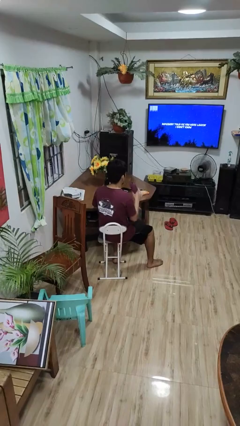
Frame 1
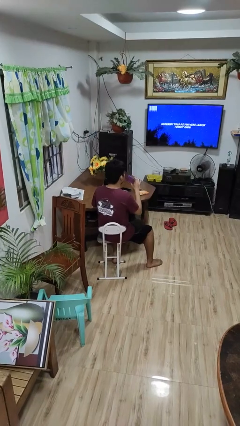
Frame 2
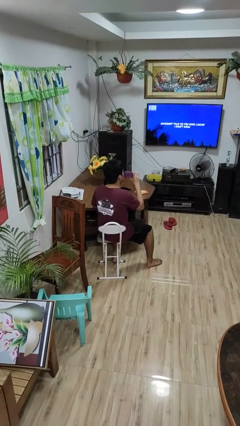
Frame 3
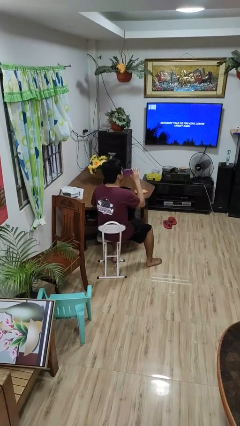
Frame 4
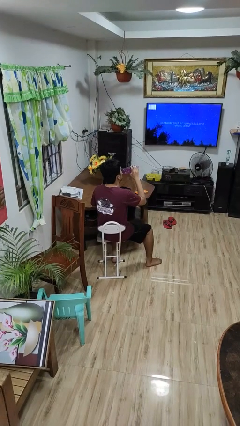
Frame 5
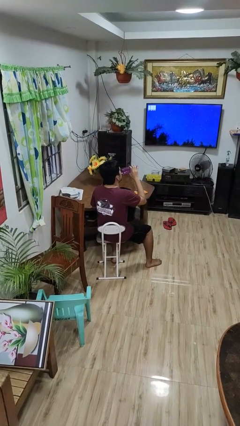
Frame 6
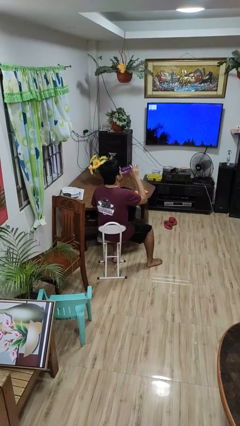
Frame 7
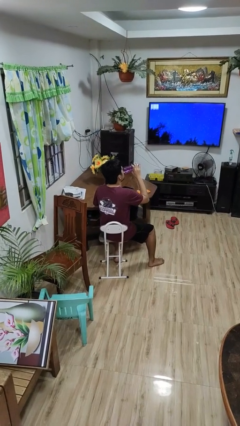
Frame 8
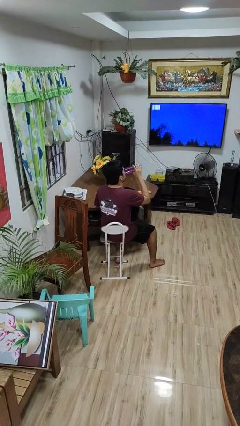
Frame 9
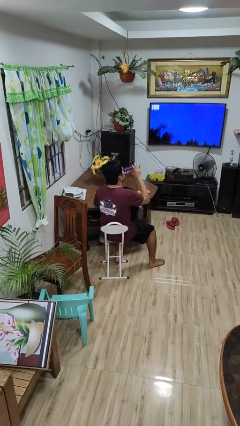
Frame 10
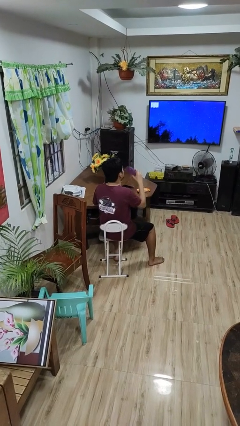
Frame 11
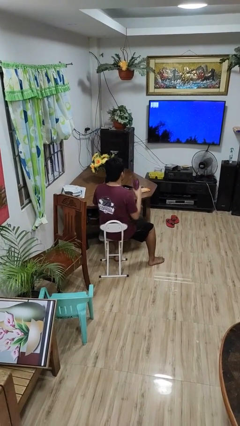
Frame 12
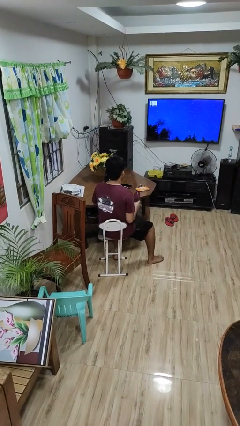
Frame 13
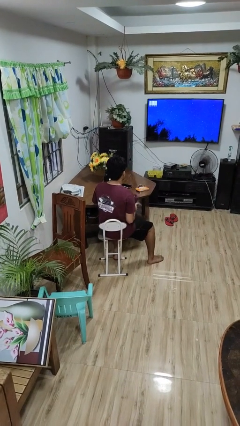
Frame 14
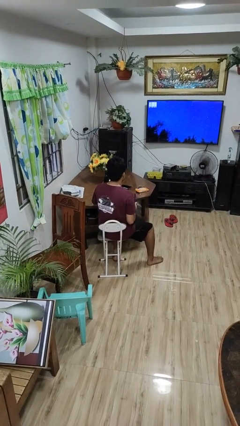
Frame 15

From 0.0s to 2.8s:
person drinks from bottle

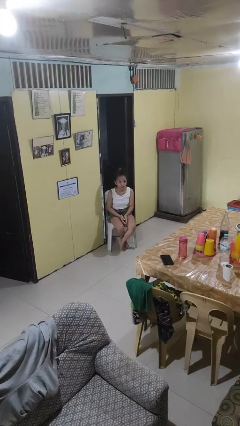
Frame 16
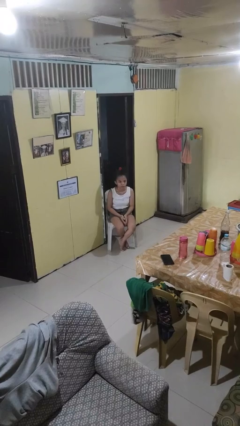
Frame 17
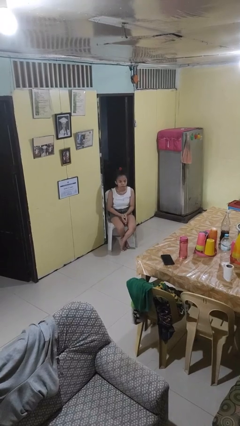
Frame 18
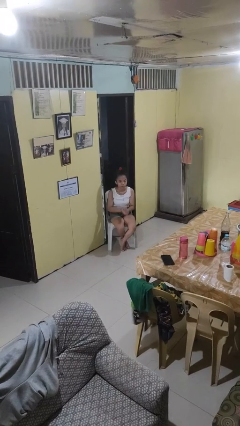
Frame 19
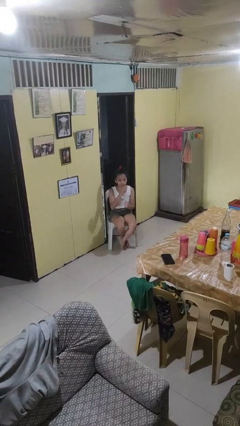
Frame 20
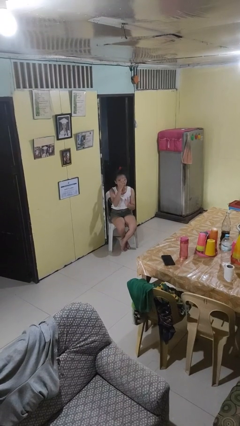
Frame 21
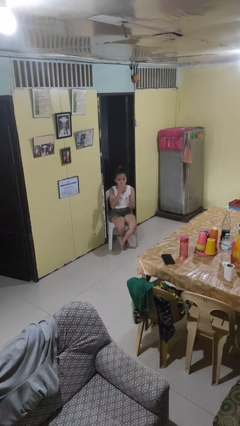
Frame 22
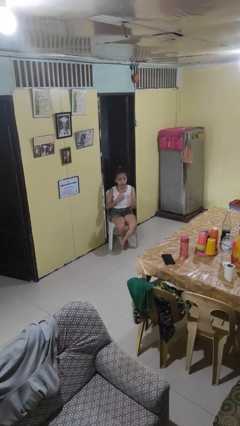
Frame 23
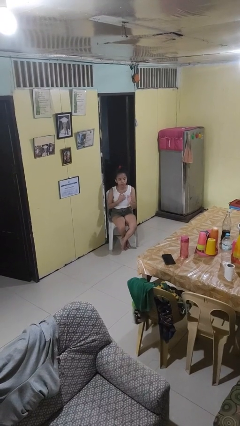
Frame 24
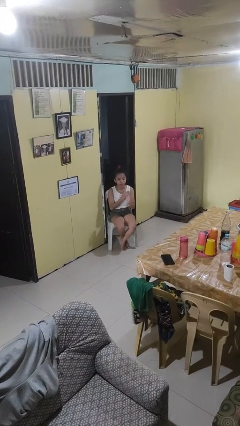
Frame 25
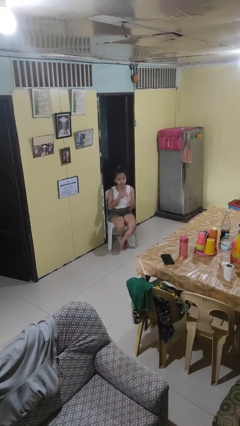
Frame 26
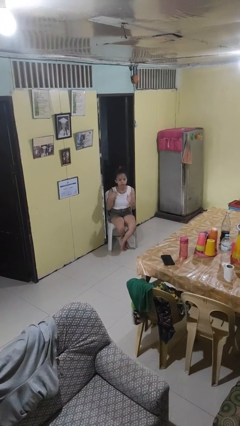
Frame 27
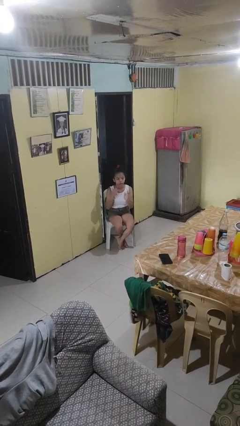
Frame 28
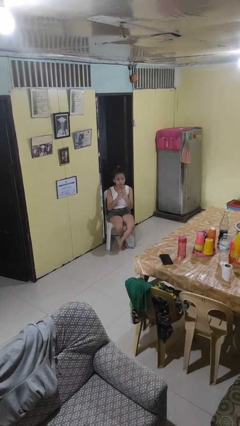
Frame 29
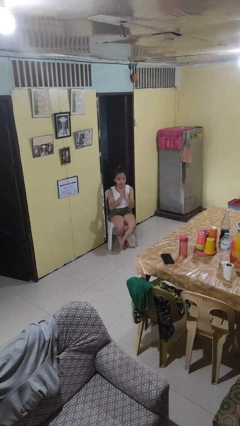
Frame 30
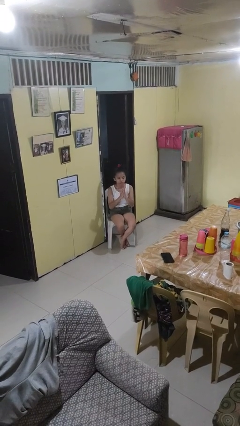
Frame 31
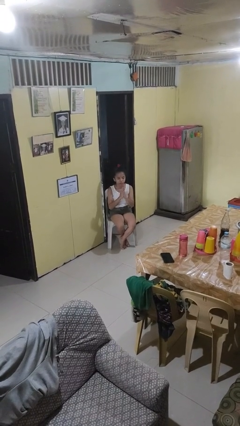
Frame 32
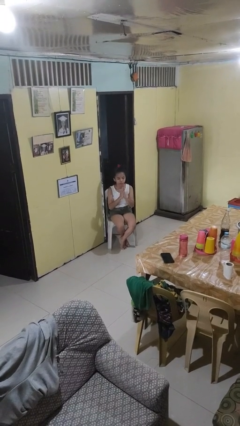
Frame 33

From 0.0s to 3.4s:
person prays

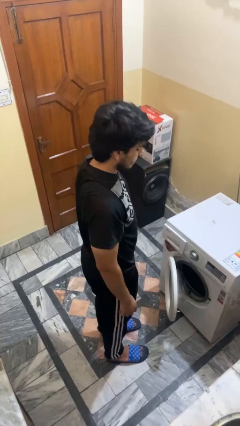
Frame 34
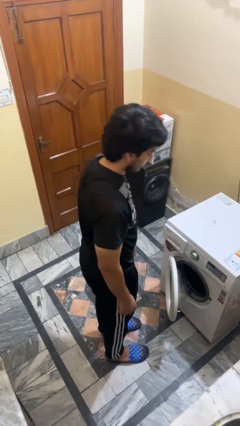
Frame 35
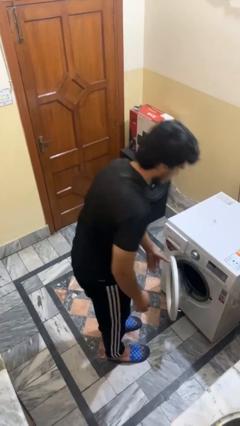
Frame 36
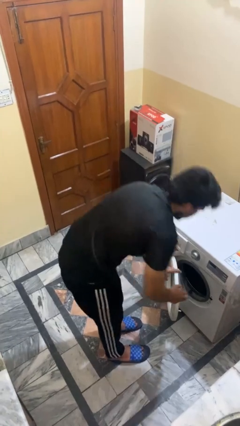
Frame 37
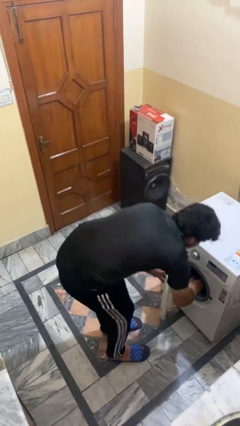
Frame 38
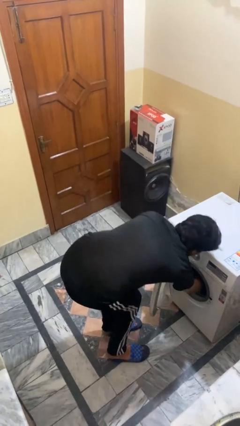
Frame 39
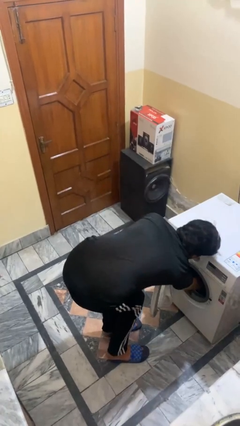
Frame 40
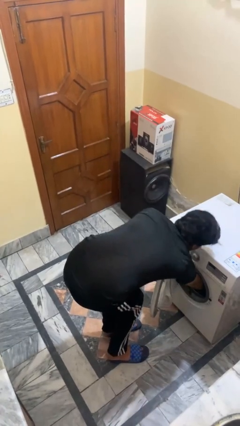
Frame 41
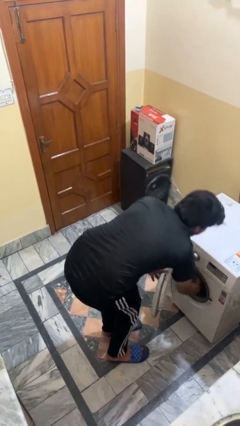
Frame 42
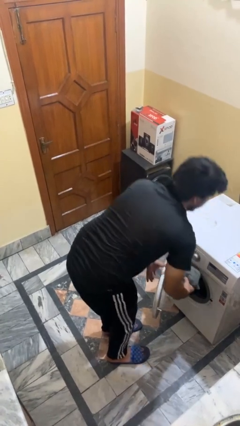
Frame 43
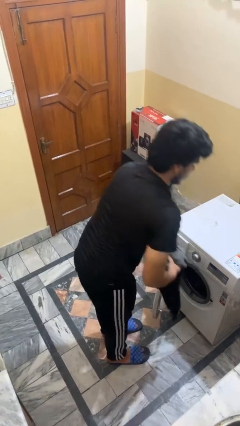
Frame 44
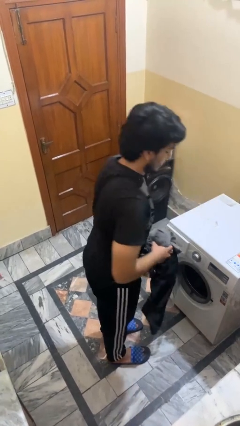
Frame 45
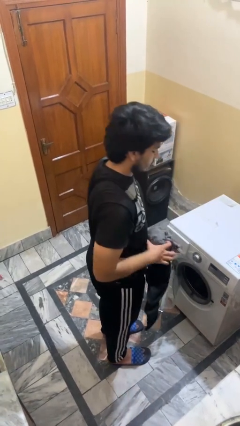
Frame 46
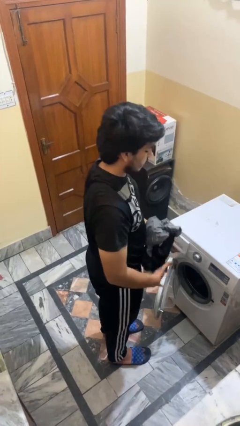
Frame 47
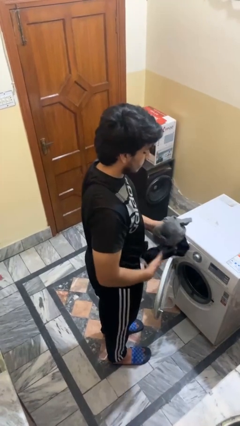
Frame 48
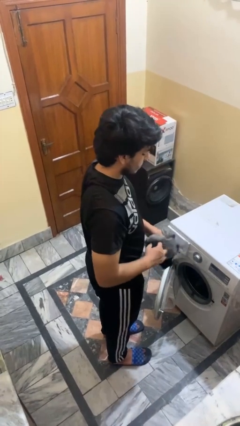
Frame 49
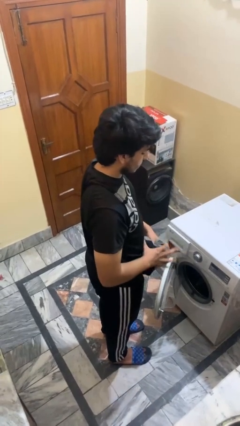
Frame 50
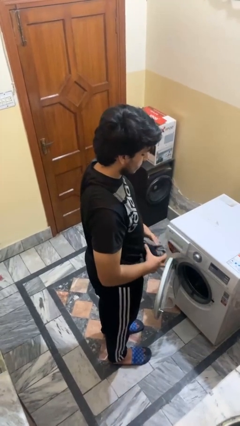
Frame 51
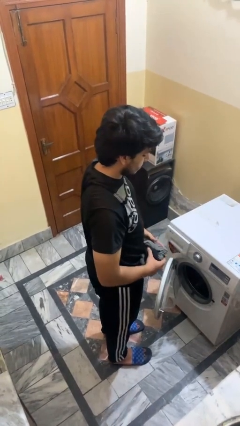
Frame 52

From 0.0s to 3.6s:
person unloads dryer

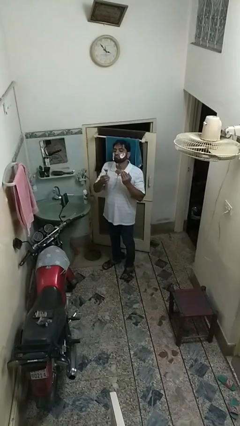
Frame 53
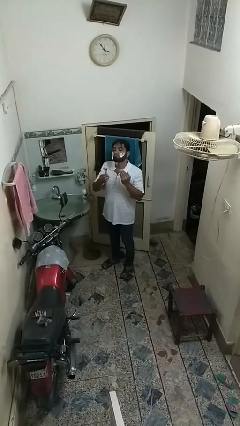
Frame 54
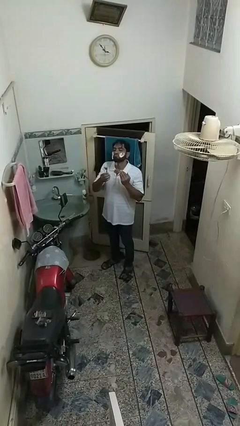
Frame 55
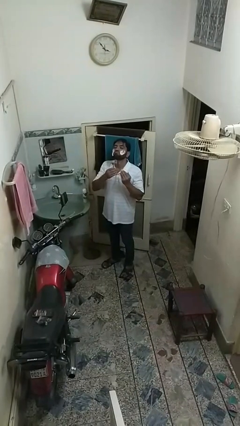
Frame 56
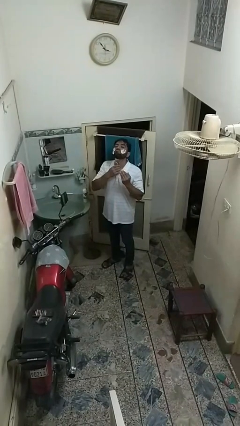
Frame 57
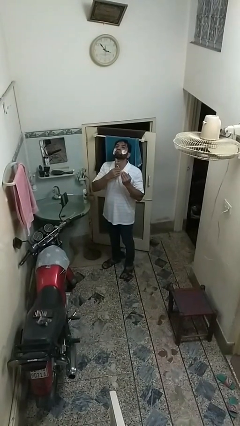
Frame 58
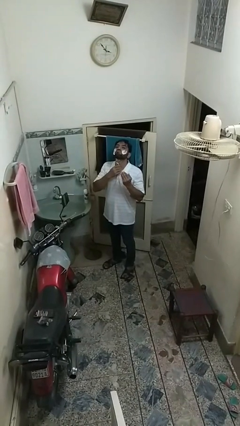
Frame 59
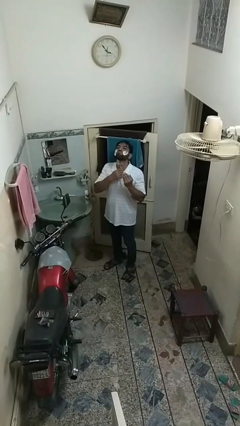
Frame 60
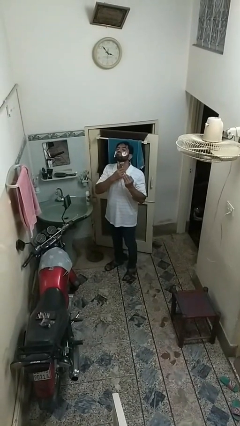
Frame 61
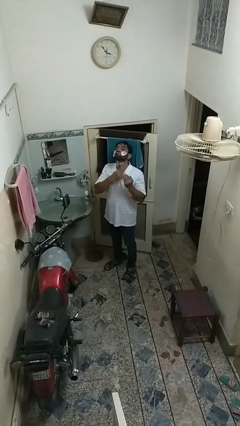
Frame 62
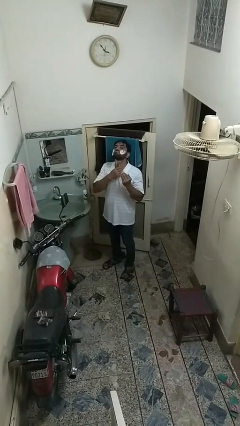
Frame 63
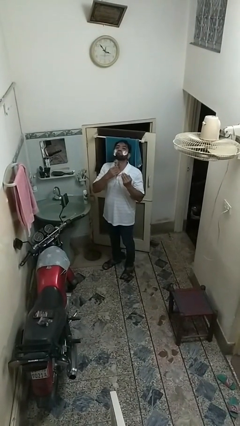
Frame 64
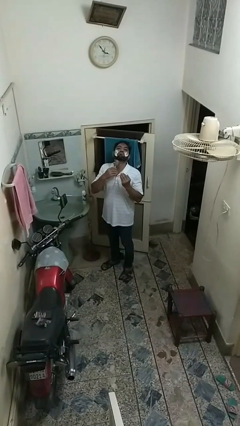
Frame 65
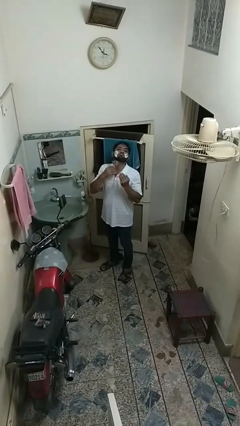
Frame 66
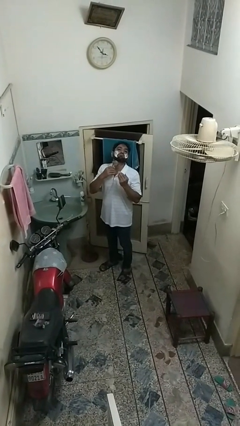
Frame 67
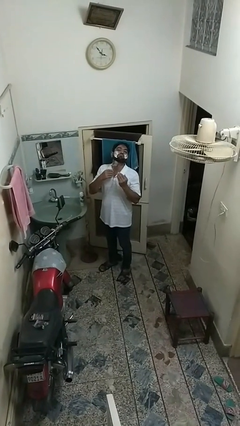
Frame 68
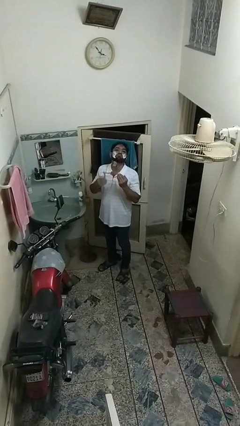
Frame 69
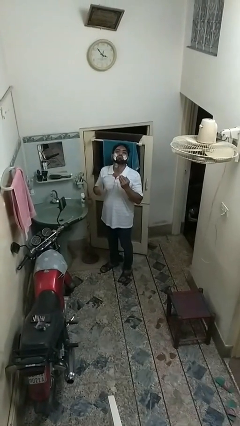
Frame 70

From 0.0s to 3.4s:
person shaves face

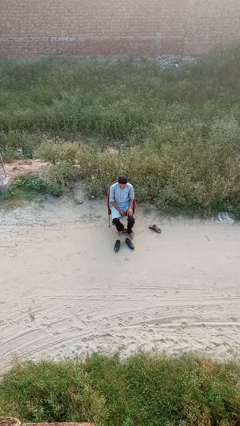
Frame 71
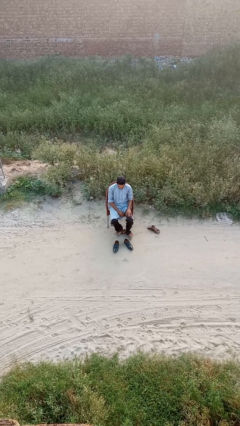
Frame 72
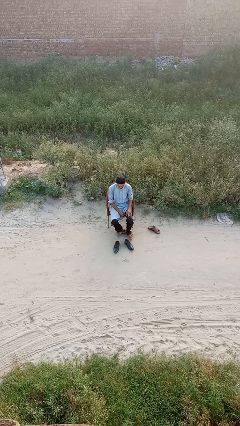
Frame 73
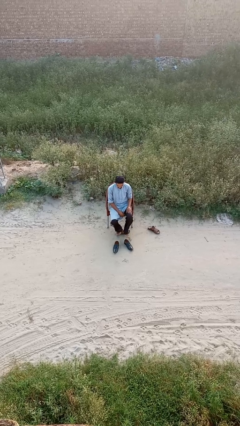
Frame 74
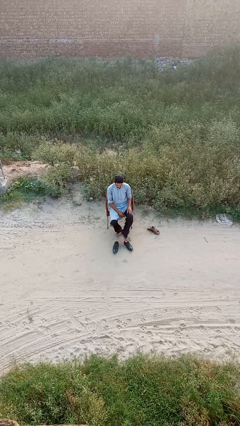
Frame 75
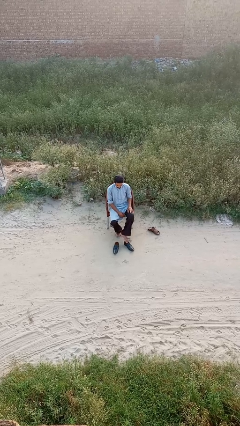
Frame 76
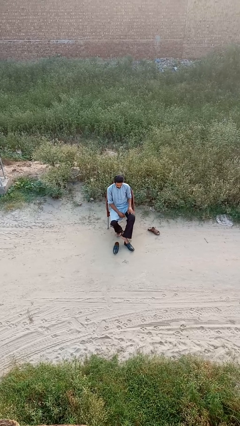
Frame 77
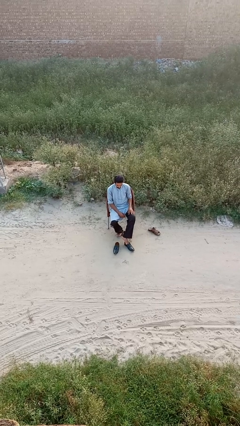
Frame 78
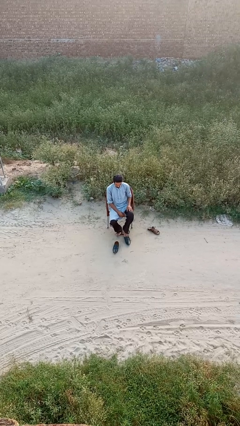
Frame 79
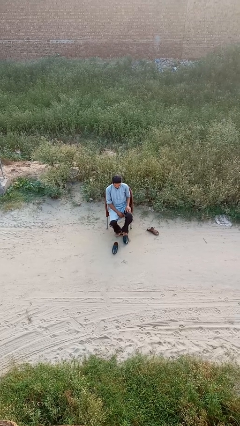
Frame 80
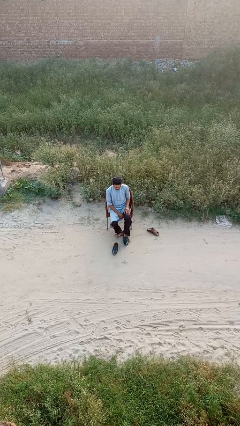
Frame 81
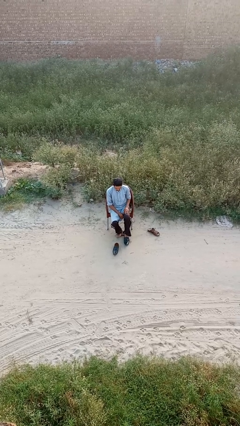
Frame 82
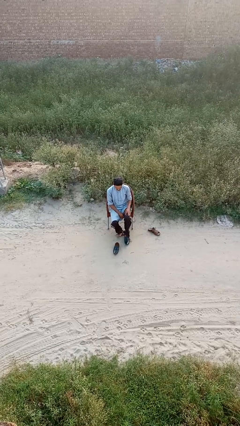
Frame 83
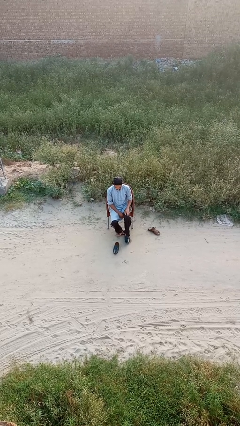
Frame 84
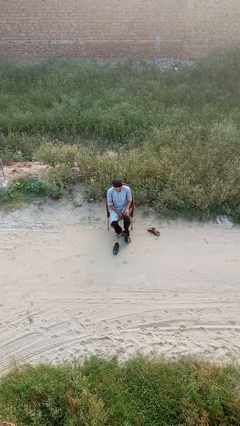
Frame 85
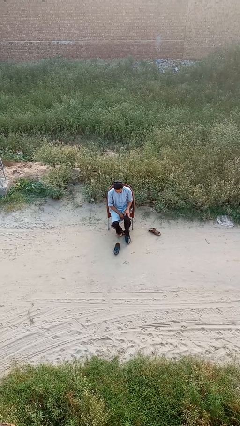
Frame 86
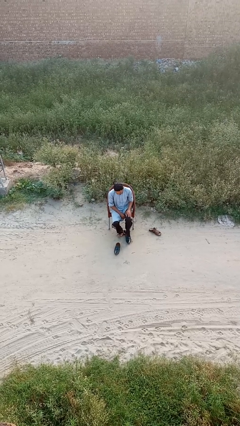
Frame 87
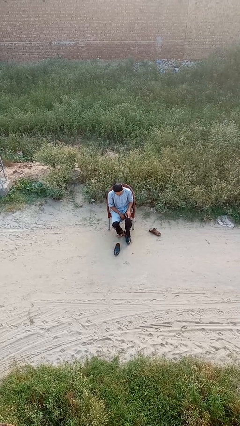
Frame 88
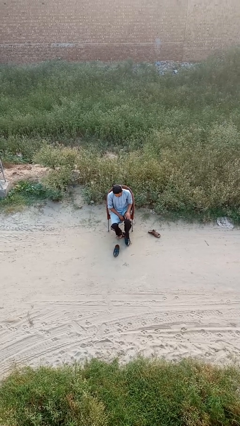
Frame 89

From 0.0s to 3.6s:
person puts on shoes

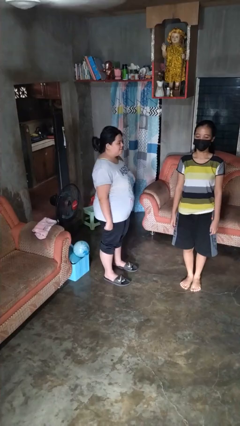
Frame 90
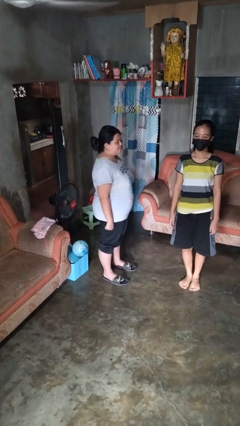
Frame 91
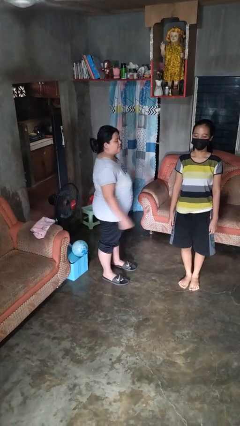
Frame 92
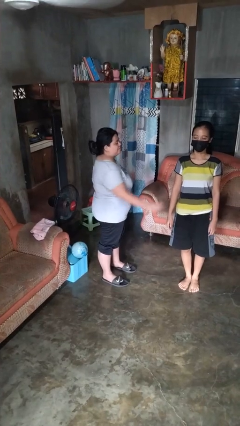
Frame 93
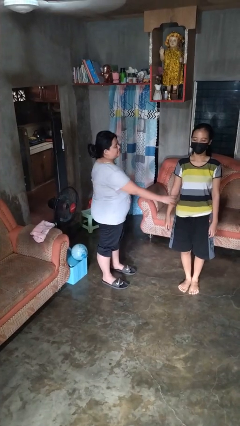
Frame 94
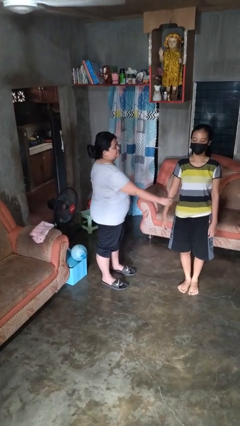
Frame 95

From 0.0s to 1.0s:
person grabs person by forearm
